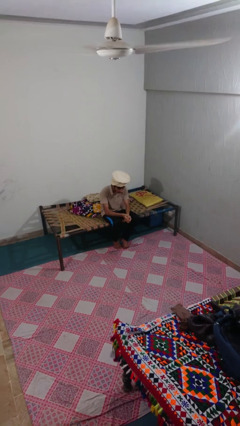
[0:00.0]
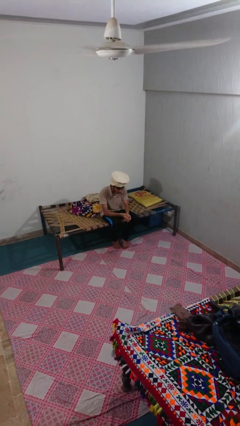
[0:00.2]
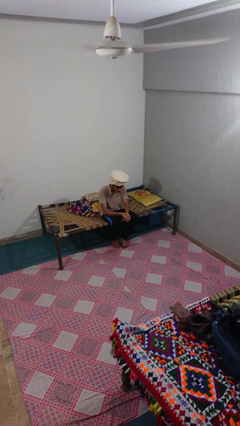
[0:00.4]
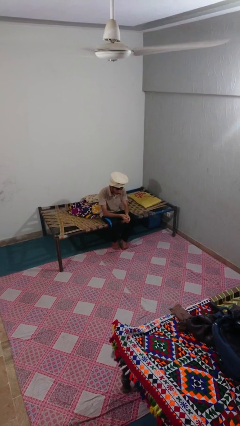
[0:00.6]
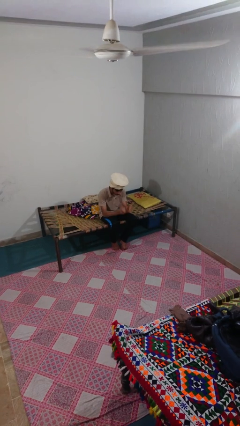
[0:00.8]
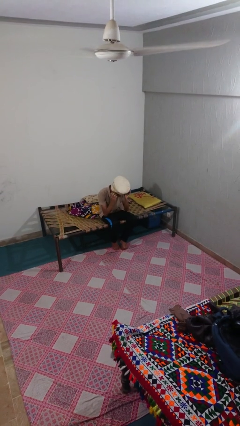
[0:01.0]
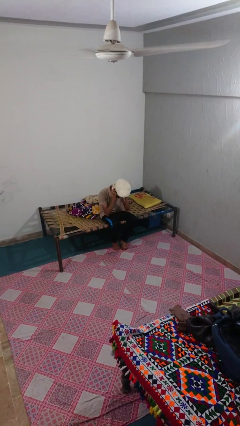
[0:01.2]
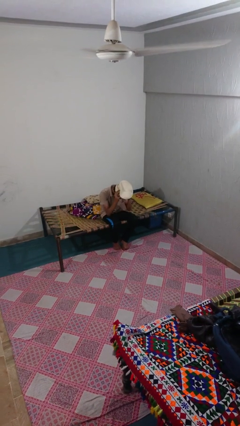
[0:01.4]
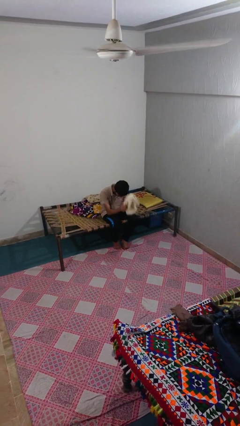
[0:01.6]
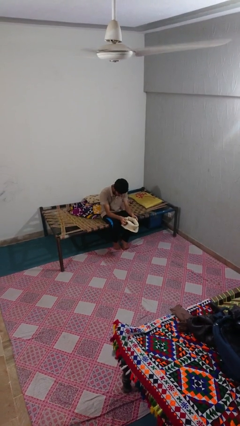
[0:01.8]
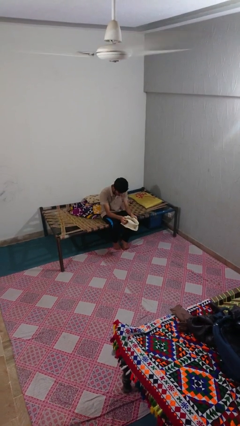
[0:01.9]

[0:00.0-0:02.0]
person takes off hat

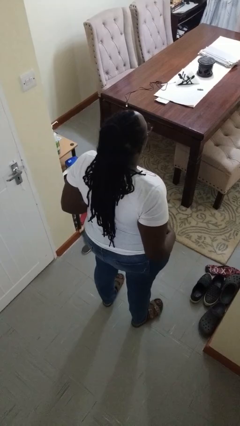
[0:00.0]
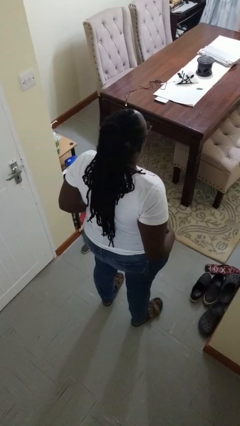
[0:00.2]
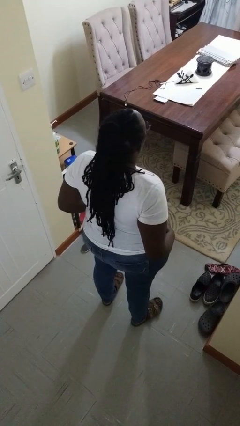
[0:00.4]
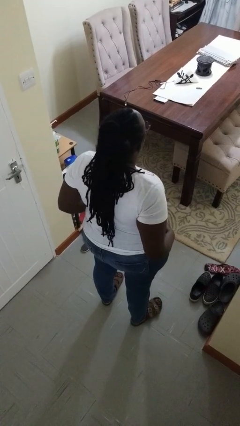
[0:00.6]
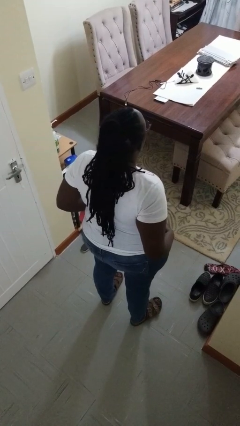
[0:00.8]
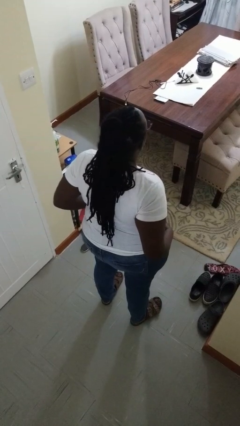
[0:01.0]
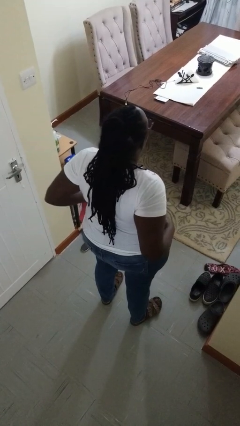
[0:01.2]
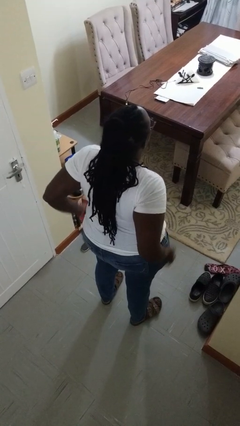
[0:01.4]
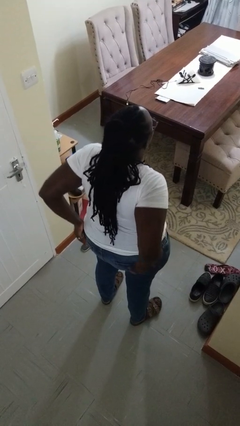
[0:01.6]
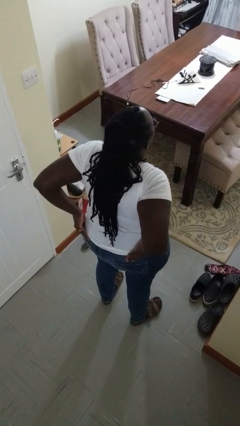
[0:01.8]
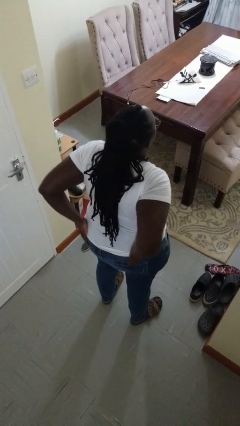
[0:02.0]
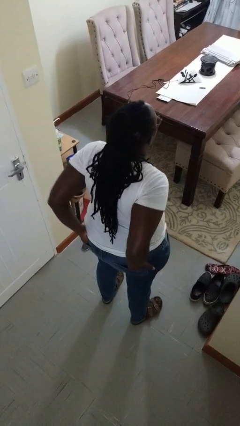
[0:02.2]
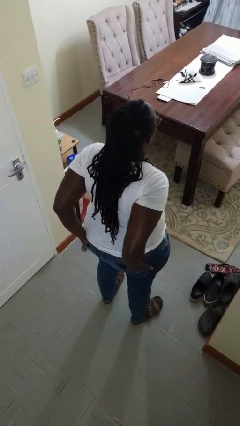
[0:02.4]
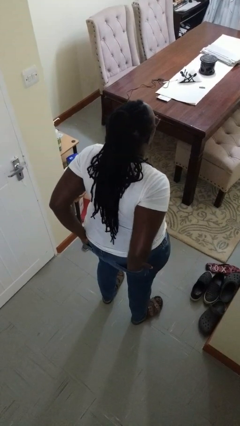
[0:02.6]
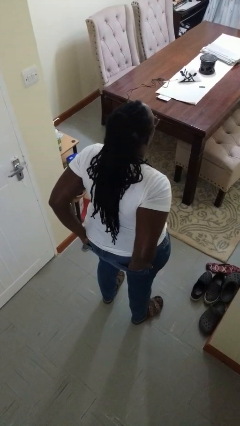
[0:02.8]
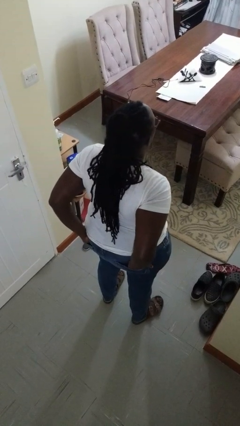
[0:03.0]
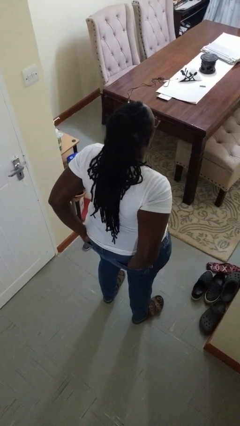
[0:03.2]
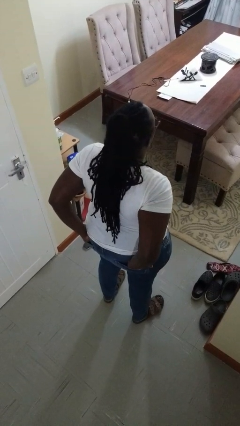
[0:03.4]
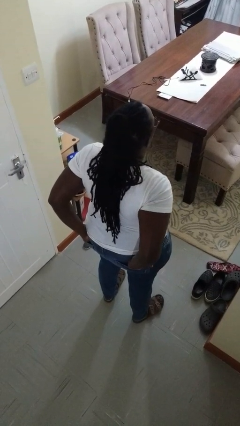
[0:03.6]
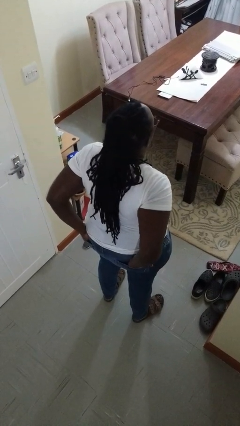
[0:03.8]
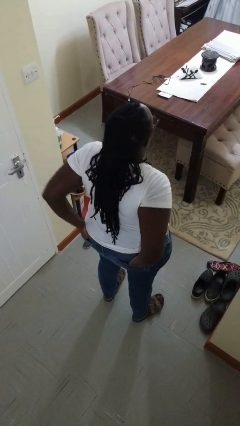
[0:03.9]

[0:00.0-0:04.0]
person puts hands in back pockets

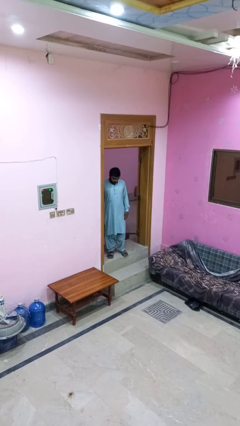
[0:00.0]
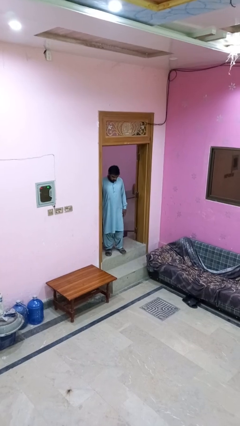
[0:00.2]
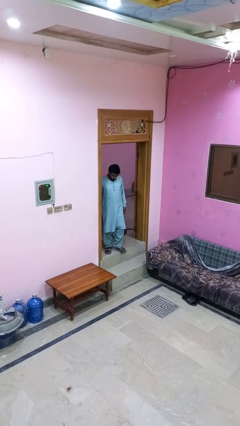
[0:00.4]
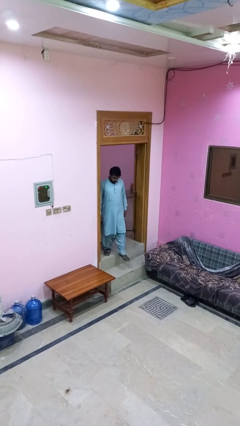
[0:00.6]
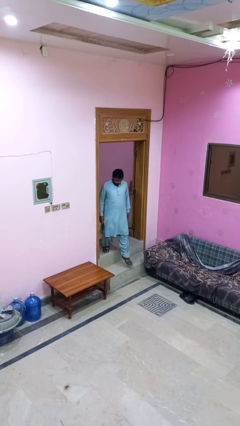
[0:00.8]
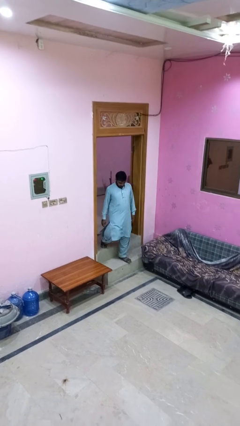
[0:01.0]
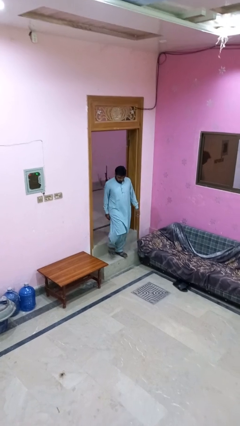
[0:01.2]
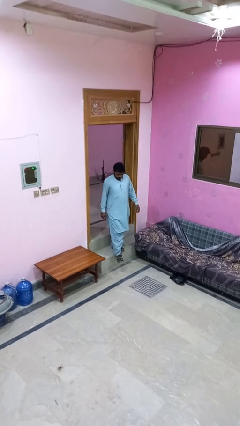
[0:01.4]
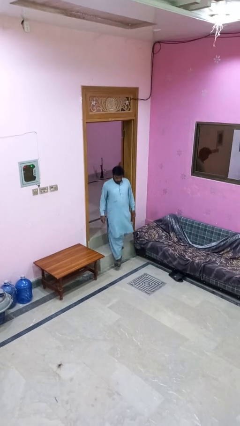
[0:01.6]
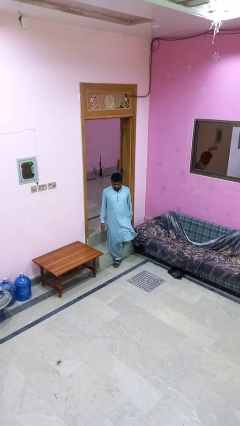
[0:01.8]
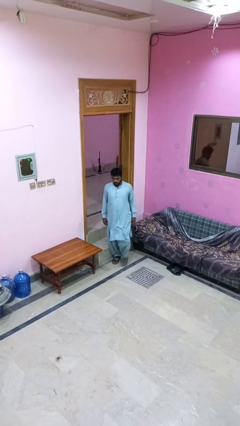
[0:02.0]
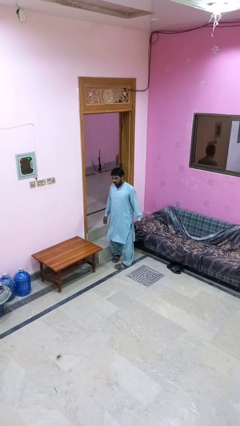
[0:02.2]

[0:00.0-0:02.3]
person climbs down stairs

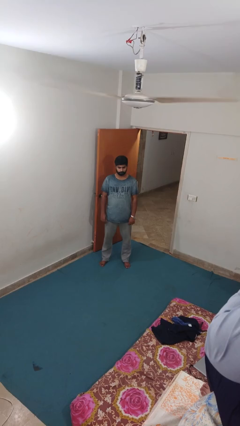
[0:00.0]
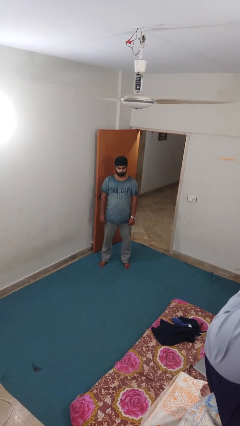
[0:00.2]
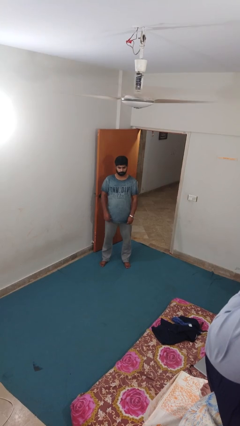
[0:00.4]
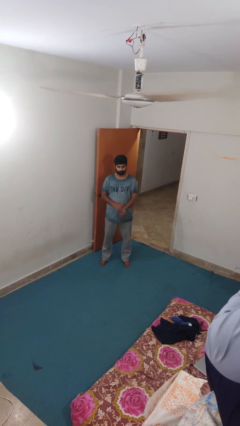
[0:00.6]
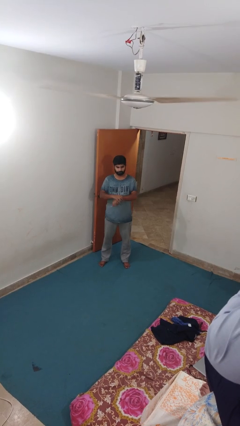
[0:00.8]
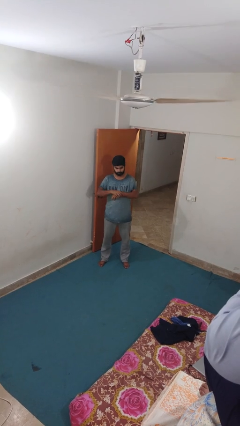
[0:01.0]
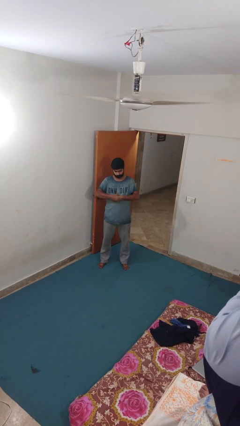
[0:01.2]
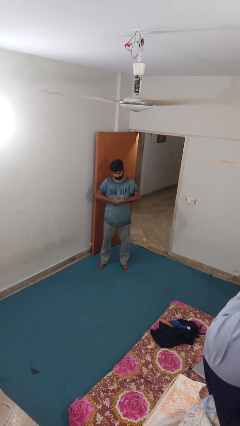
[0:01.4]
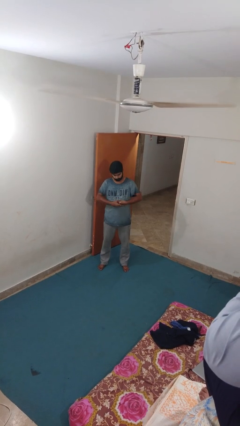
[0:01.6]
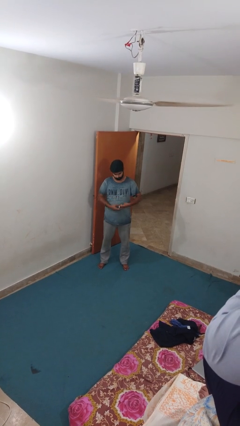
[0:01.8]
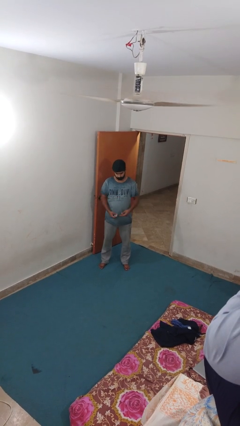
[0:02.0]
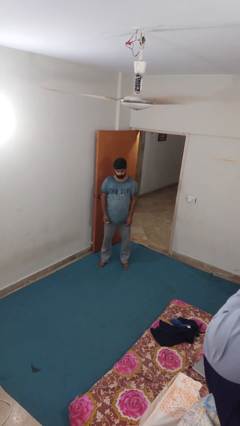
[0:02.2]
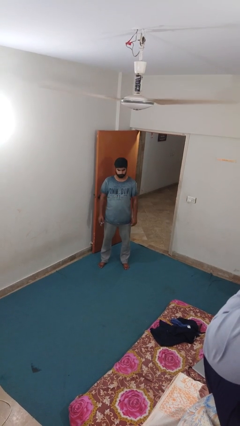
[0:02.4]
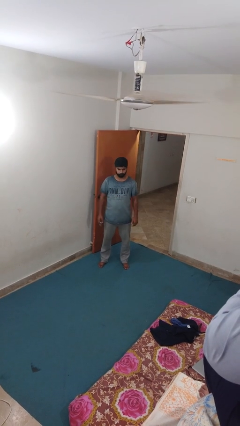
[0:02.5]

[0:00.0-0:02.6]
person takes off wristwatch

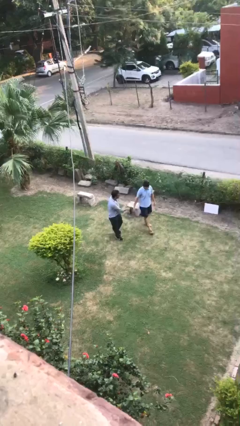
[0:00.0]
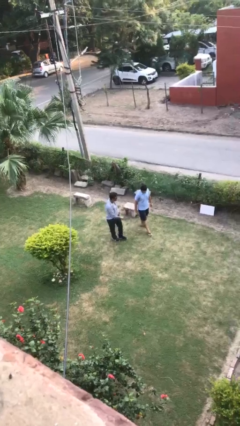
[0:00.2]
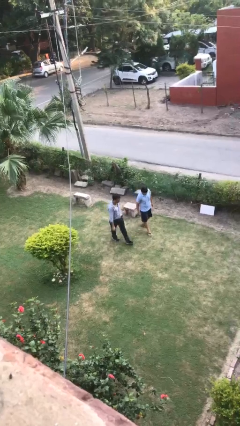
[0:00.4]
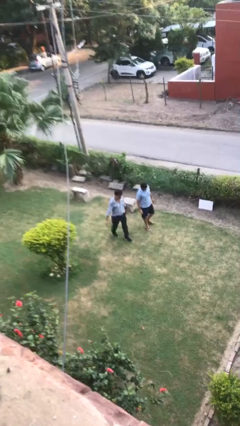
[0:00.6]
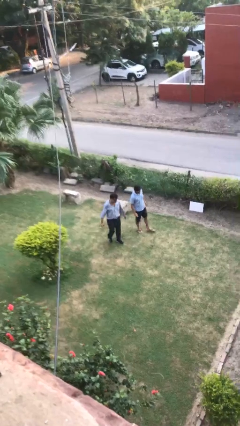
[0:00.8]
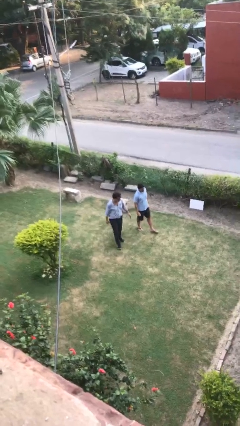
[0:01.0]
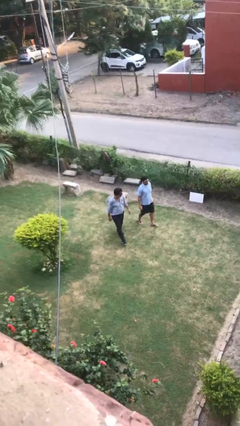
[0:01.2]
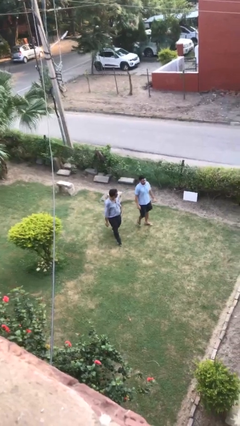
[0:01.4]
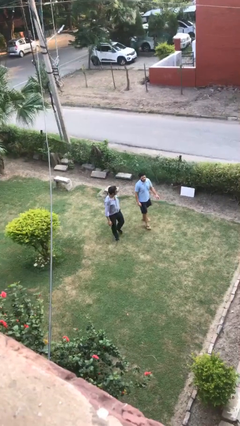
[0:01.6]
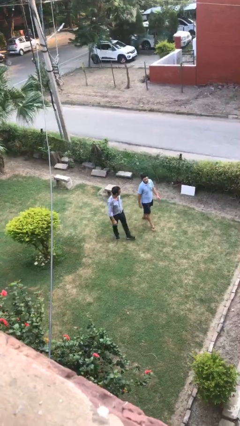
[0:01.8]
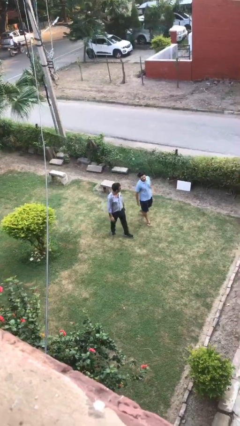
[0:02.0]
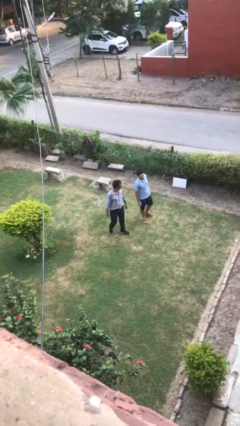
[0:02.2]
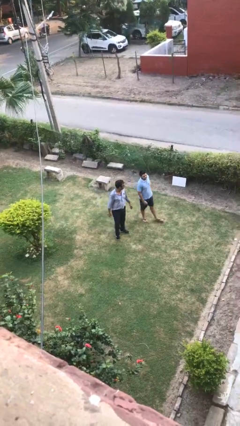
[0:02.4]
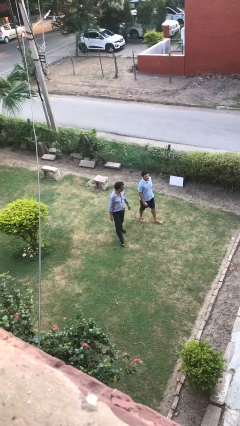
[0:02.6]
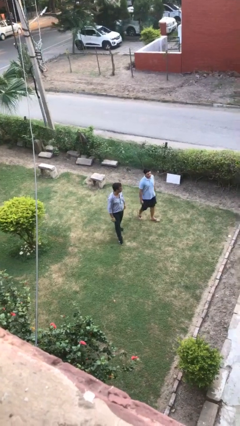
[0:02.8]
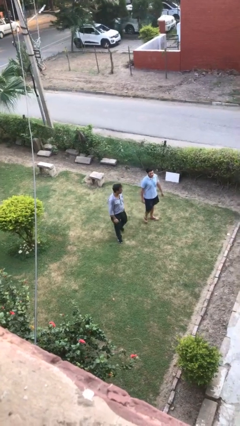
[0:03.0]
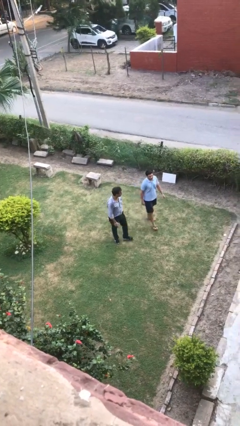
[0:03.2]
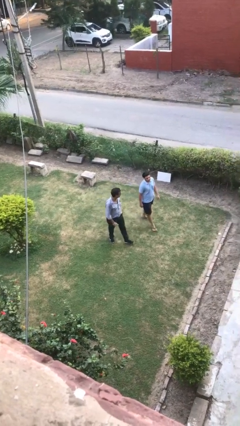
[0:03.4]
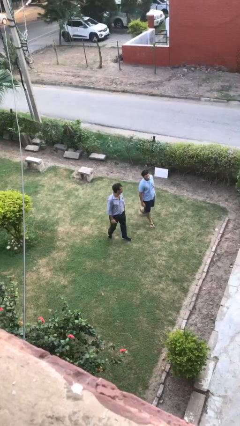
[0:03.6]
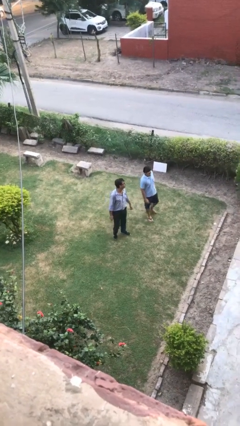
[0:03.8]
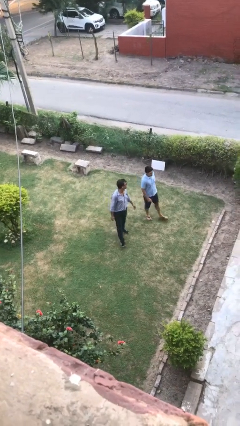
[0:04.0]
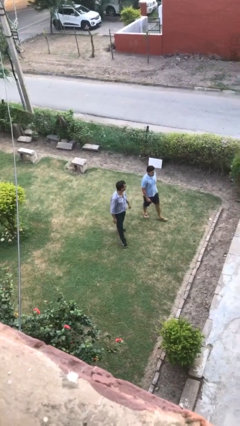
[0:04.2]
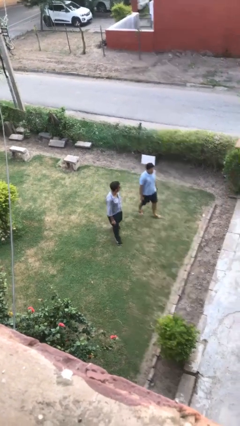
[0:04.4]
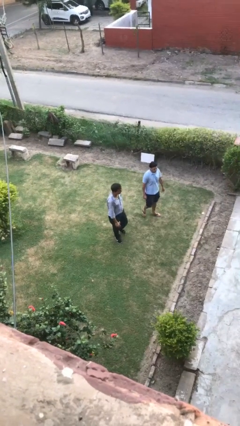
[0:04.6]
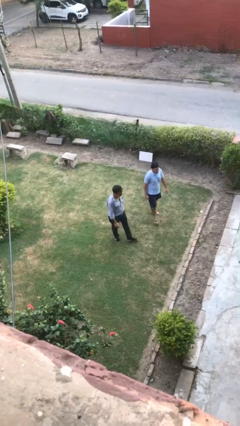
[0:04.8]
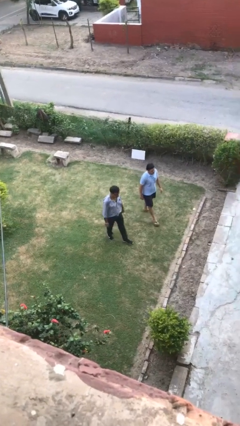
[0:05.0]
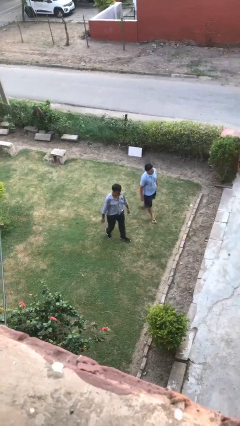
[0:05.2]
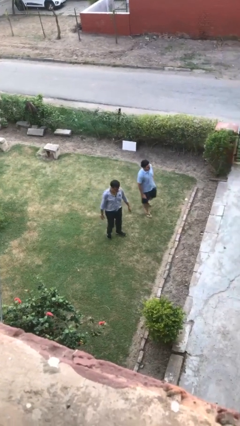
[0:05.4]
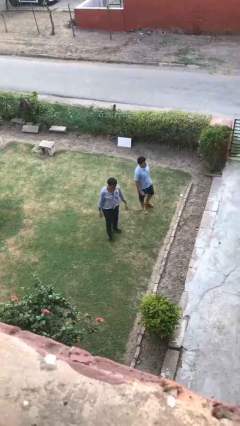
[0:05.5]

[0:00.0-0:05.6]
person talks to person

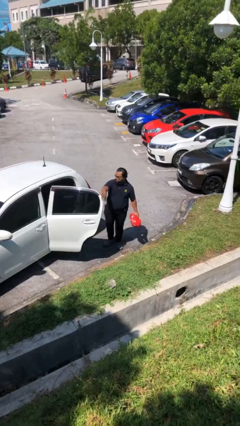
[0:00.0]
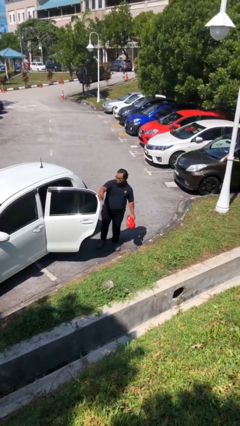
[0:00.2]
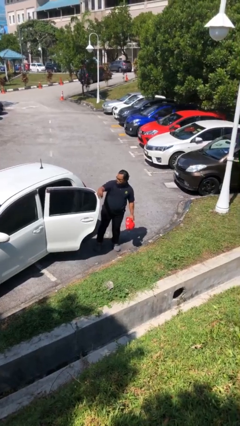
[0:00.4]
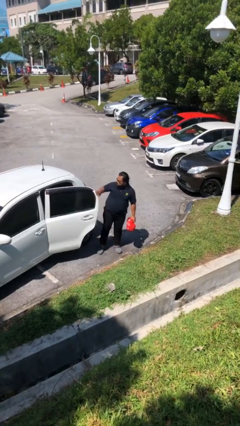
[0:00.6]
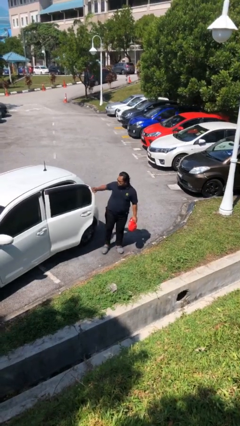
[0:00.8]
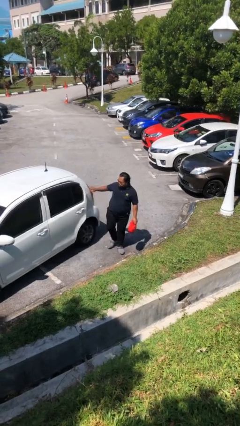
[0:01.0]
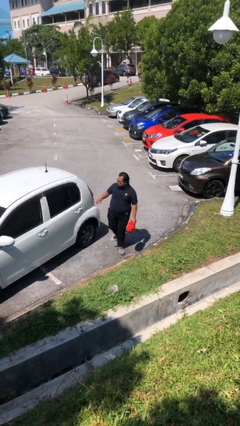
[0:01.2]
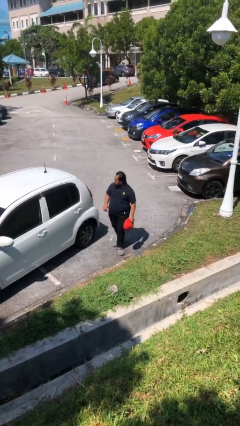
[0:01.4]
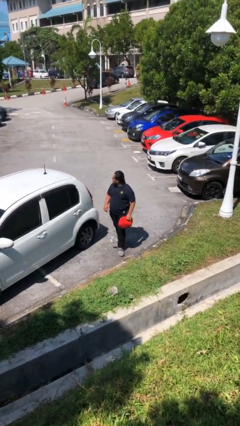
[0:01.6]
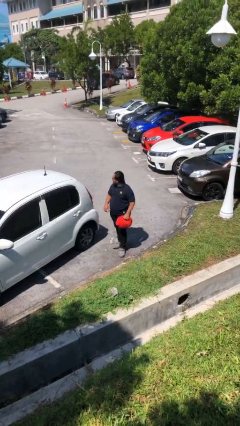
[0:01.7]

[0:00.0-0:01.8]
person closes car door
